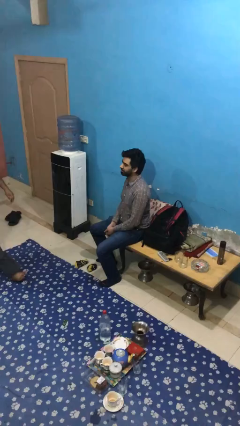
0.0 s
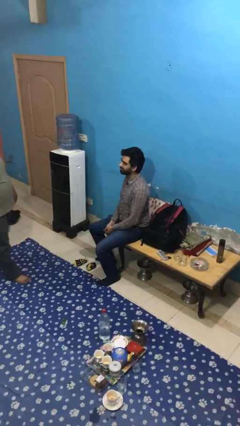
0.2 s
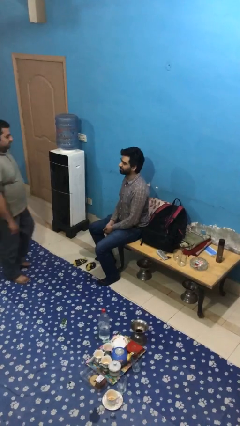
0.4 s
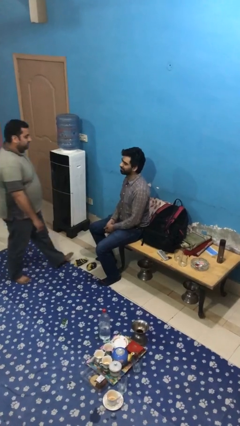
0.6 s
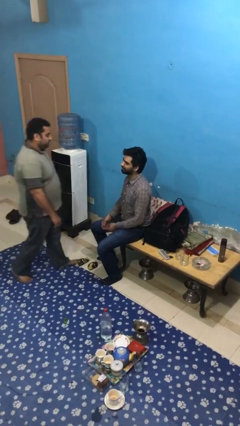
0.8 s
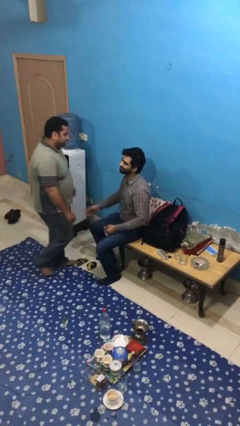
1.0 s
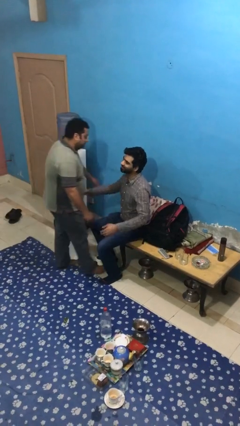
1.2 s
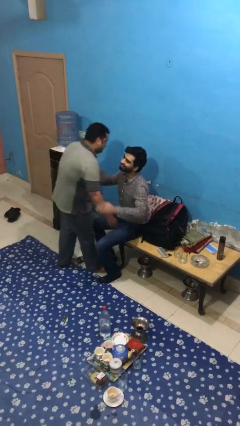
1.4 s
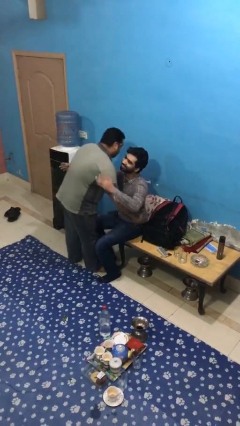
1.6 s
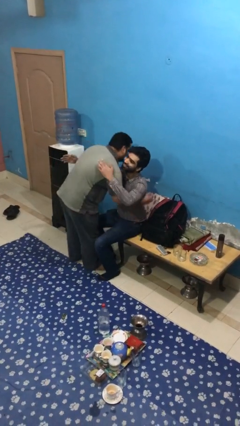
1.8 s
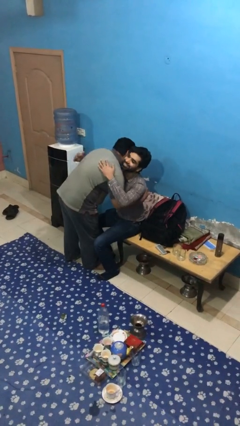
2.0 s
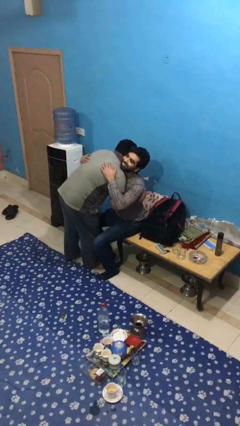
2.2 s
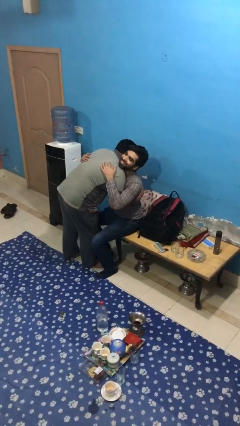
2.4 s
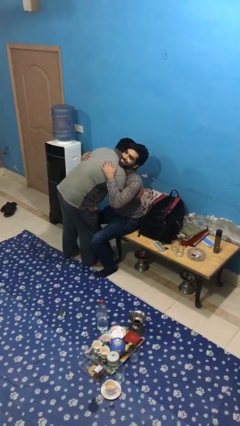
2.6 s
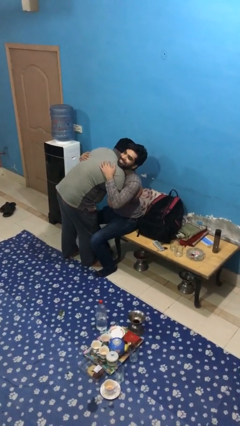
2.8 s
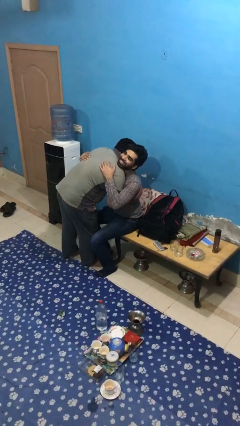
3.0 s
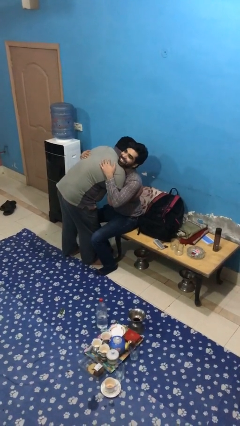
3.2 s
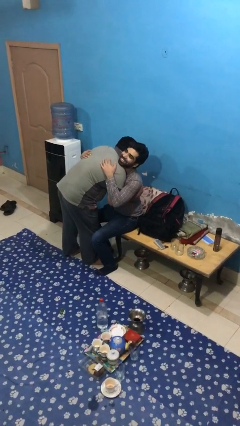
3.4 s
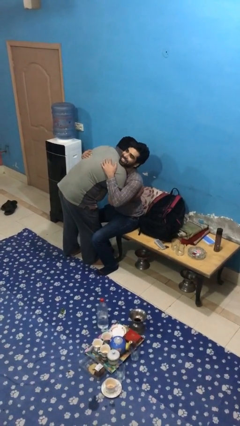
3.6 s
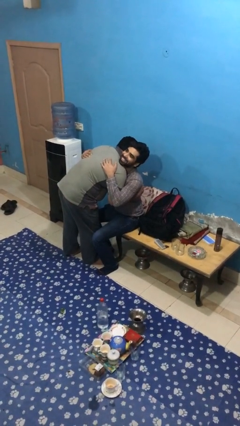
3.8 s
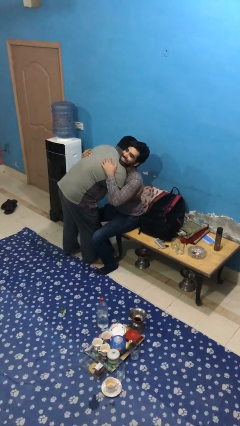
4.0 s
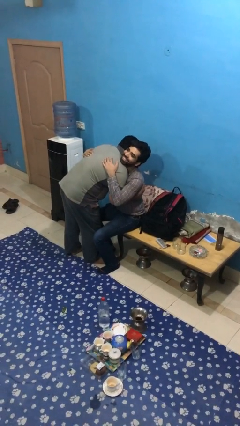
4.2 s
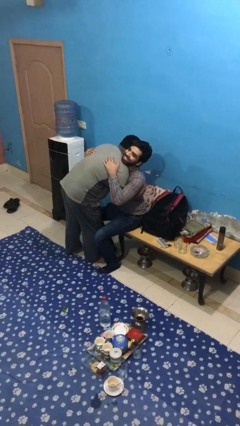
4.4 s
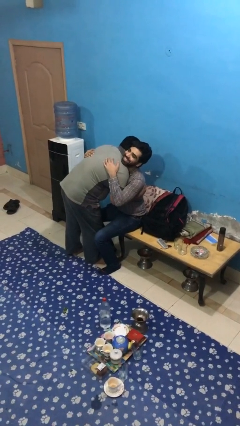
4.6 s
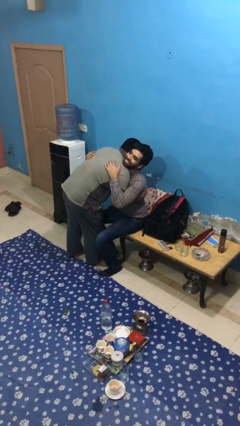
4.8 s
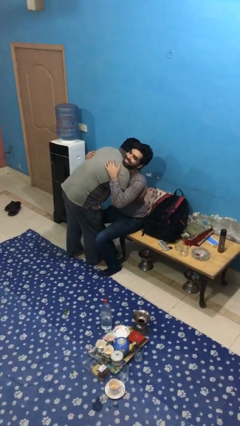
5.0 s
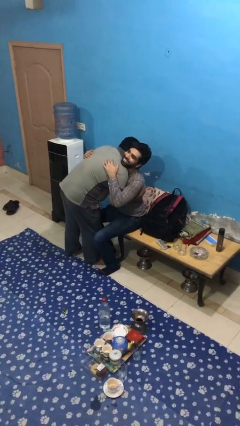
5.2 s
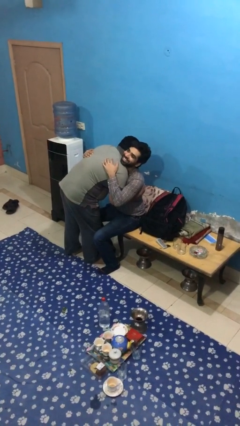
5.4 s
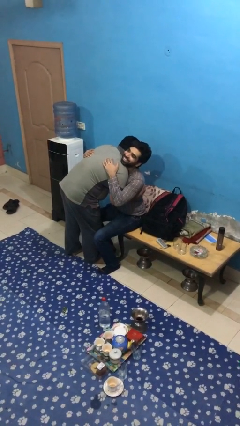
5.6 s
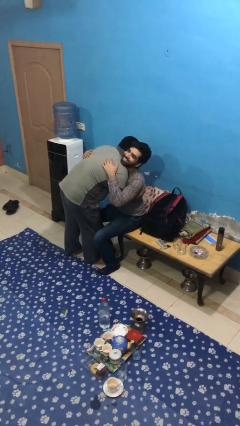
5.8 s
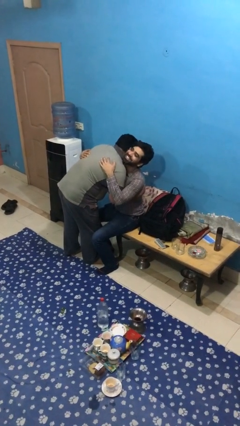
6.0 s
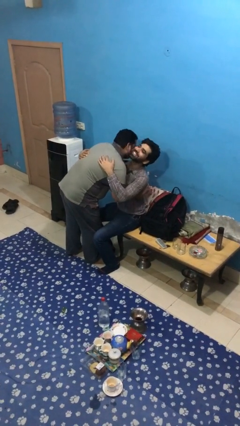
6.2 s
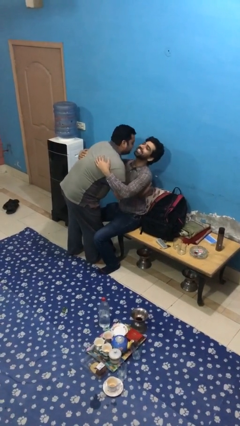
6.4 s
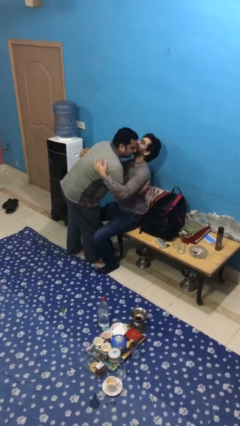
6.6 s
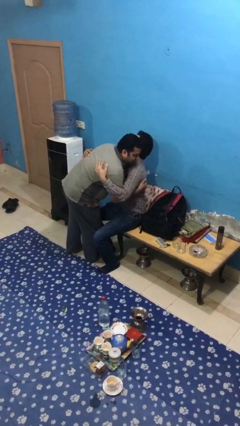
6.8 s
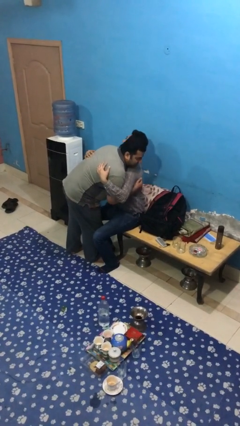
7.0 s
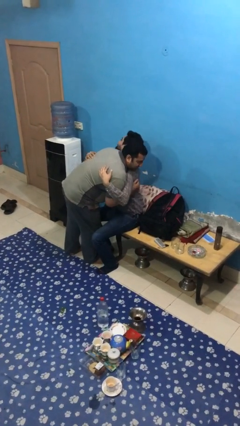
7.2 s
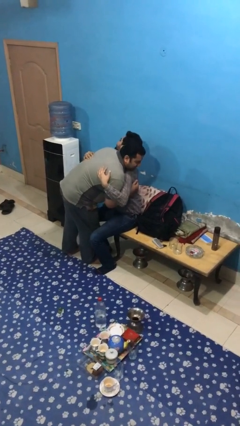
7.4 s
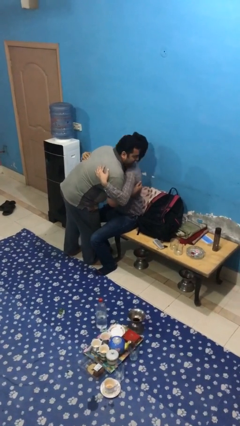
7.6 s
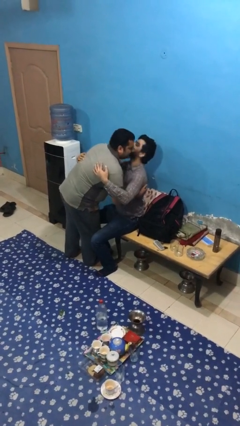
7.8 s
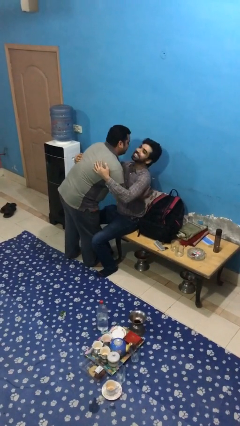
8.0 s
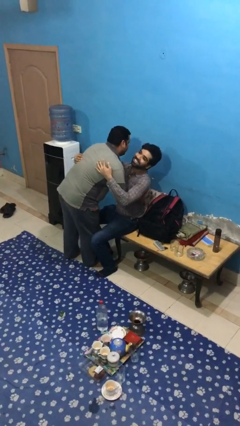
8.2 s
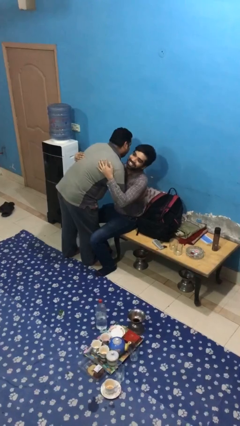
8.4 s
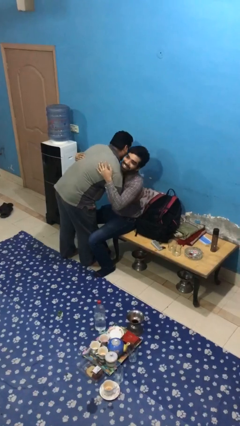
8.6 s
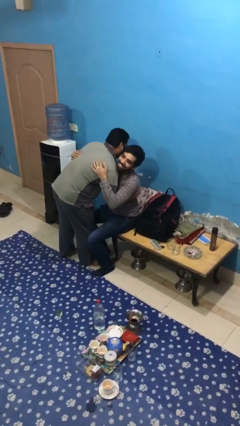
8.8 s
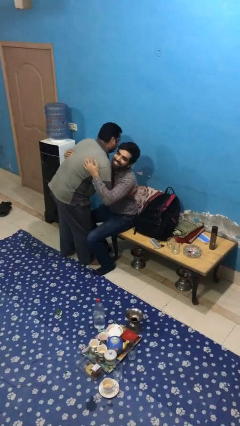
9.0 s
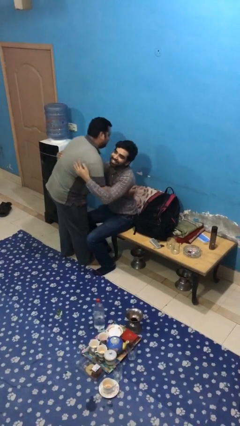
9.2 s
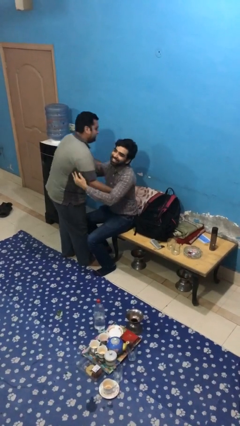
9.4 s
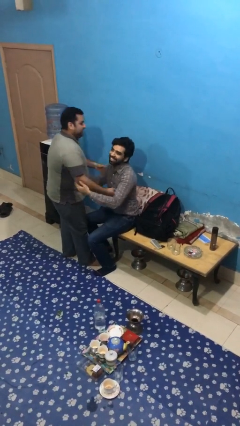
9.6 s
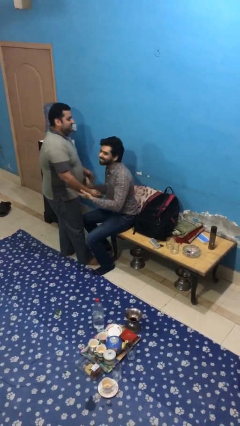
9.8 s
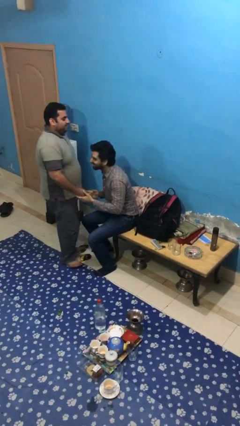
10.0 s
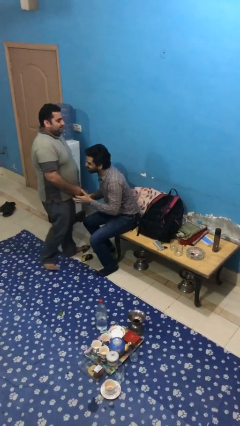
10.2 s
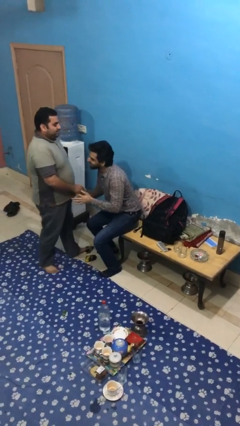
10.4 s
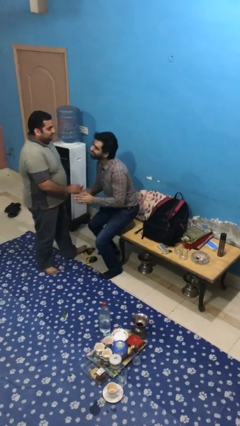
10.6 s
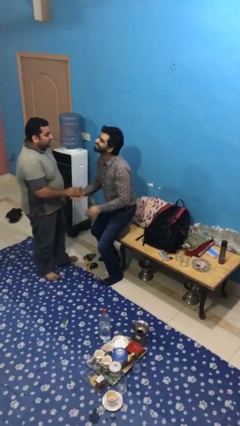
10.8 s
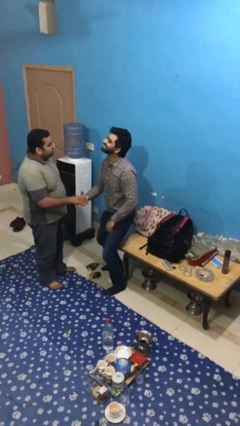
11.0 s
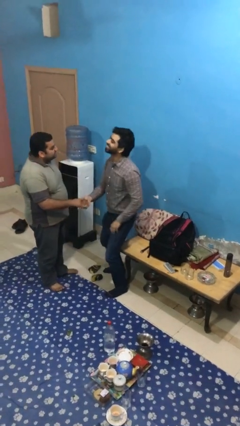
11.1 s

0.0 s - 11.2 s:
person embraces person

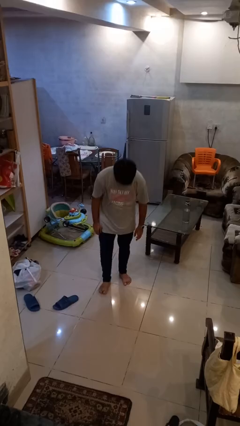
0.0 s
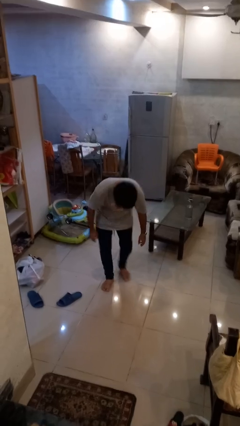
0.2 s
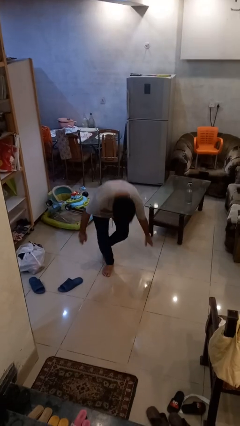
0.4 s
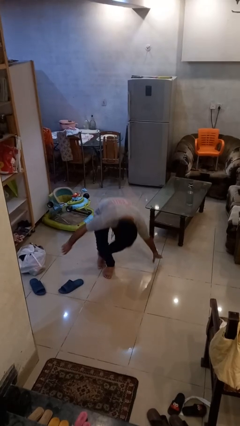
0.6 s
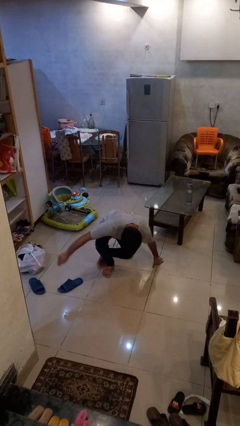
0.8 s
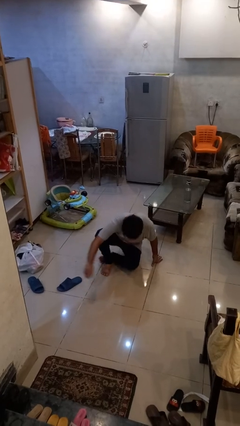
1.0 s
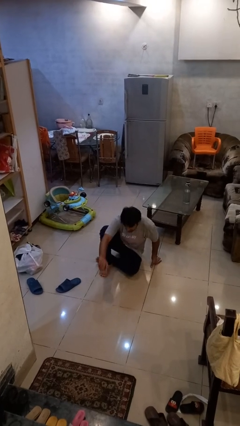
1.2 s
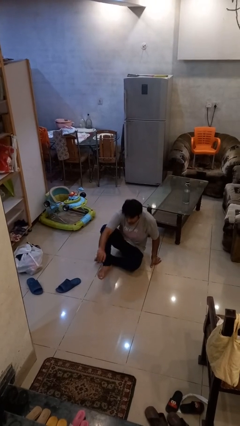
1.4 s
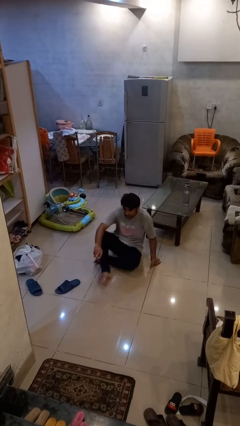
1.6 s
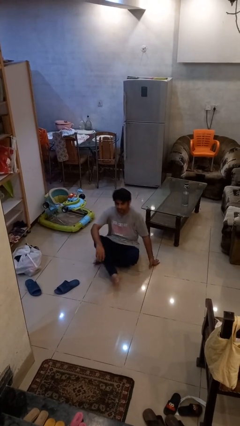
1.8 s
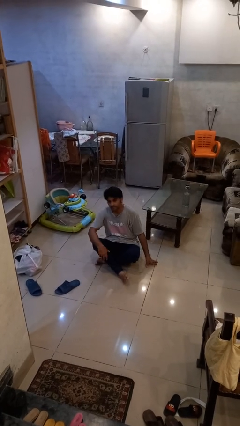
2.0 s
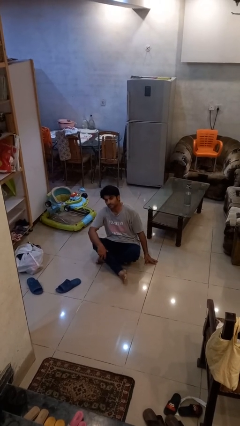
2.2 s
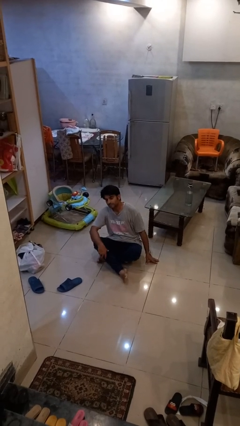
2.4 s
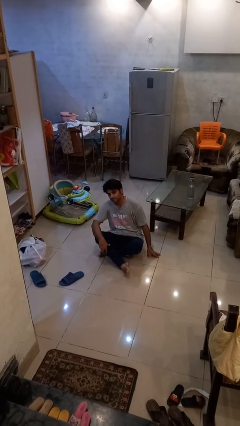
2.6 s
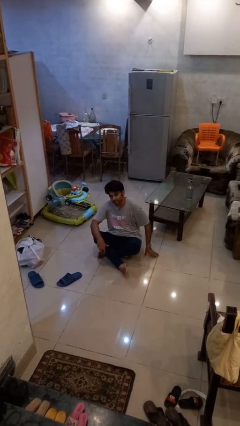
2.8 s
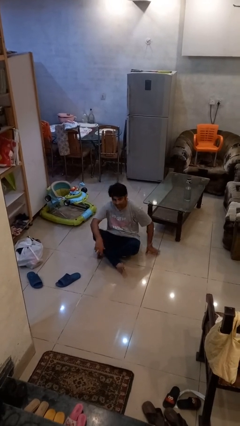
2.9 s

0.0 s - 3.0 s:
person sits crisscross

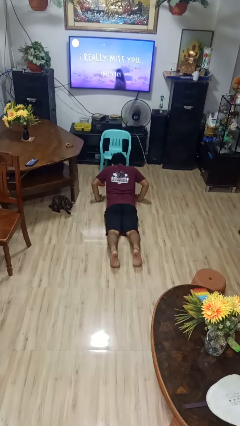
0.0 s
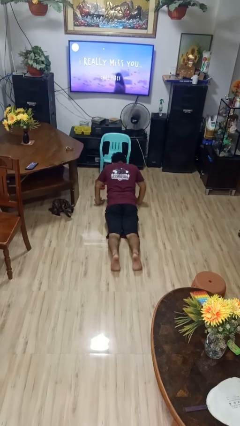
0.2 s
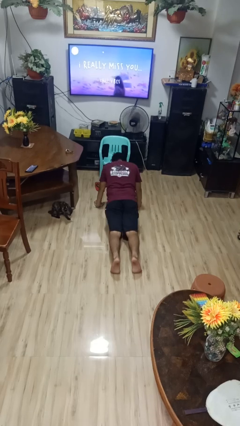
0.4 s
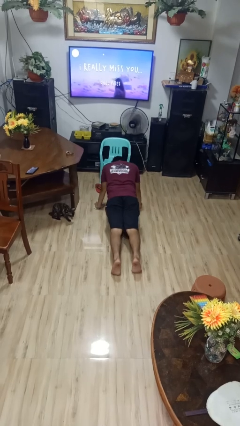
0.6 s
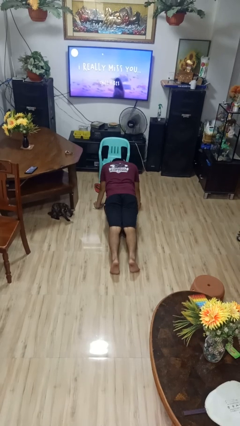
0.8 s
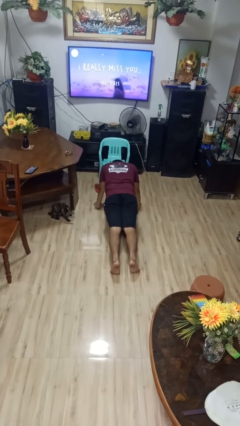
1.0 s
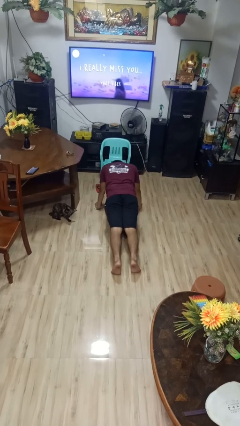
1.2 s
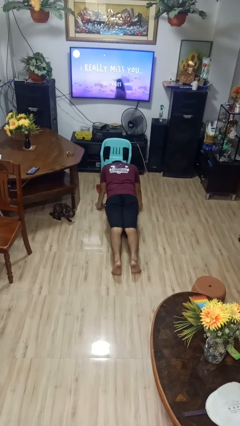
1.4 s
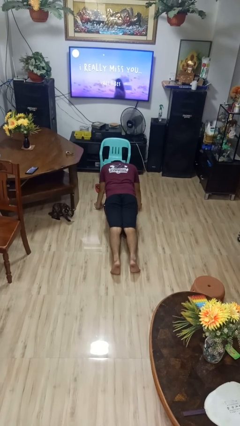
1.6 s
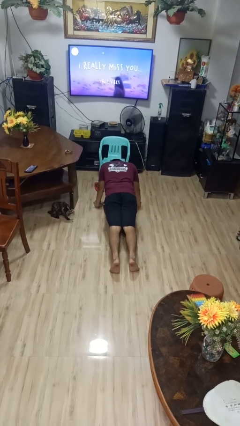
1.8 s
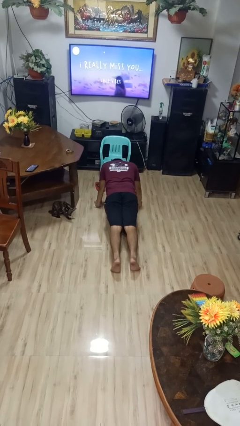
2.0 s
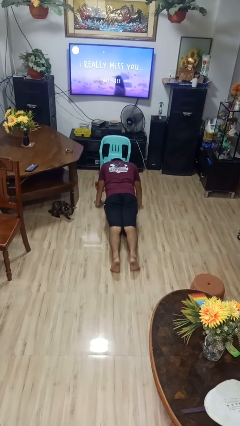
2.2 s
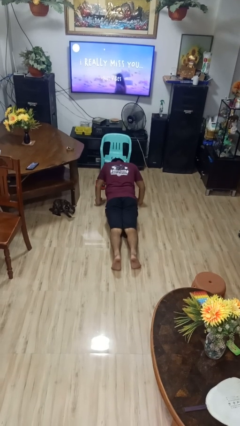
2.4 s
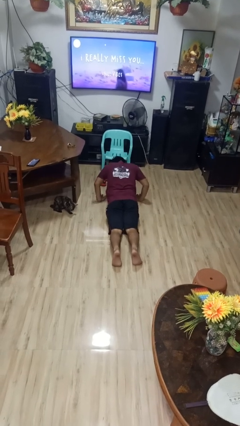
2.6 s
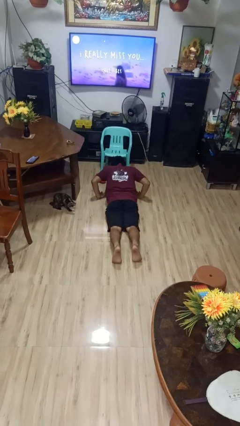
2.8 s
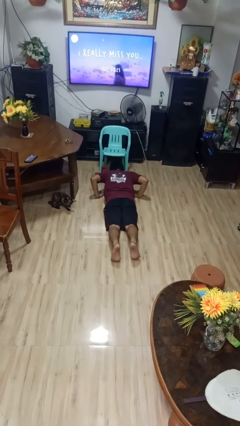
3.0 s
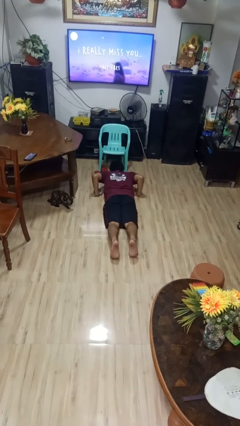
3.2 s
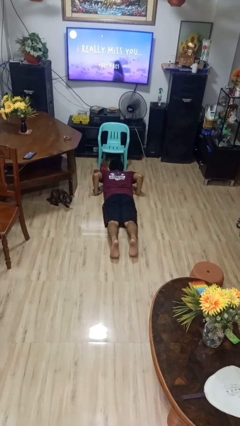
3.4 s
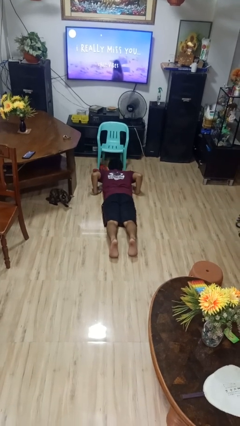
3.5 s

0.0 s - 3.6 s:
person exercises with pushup
